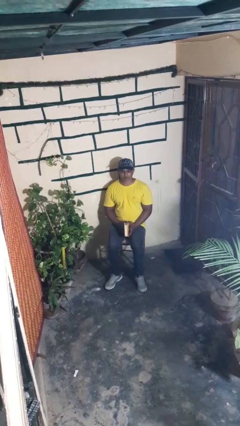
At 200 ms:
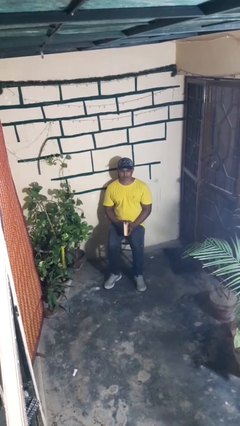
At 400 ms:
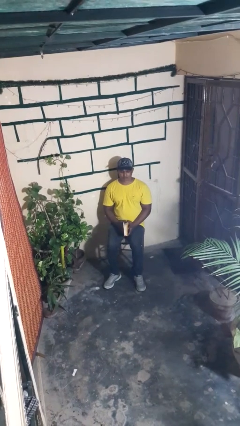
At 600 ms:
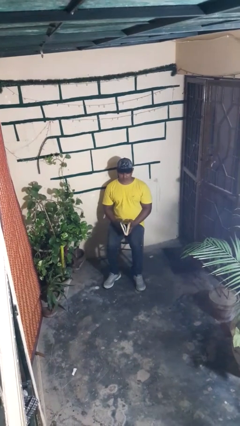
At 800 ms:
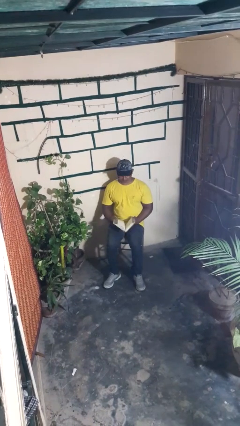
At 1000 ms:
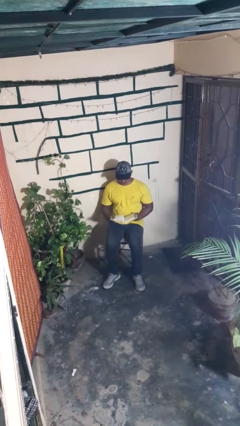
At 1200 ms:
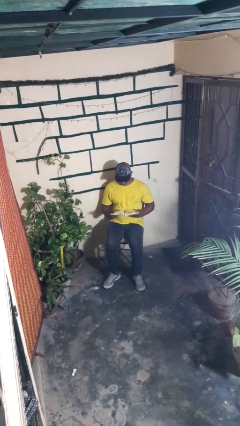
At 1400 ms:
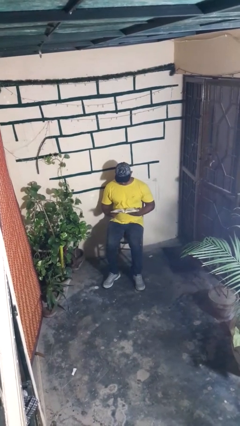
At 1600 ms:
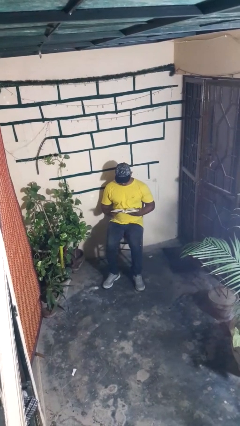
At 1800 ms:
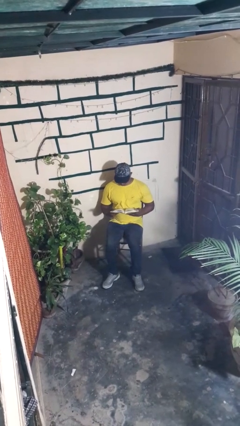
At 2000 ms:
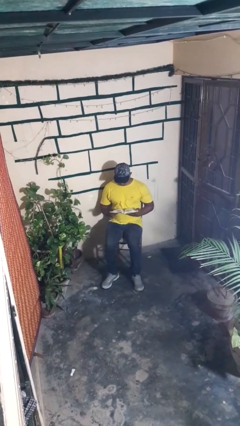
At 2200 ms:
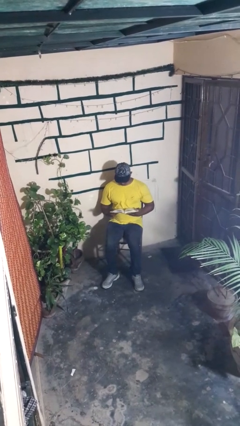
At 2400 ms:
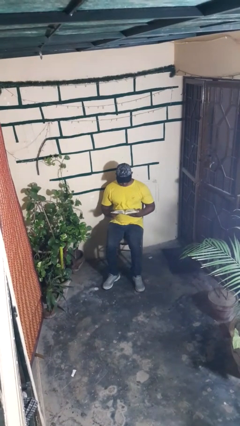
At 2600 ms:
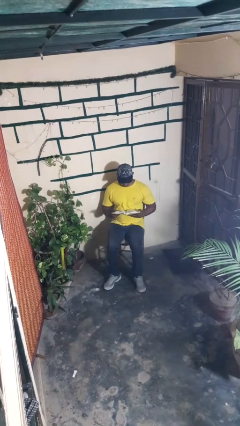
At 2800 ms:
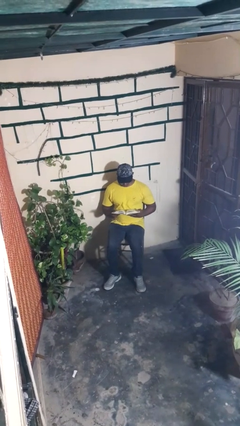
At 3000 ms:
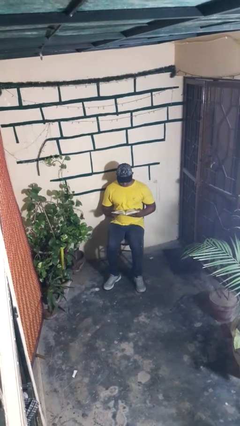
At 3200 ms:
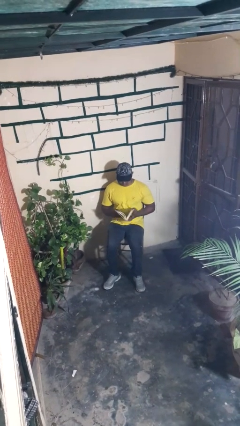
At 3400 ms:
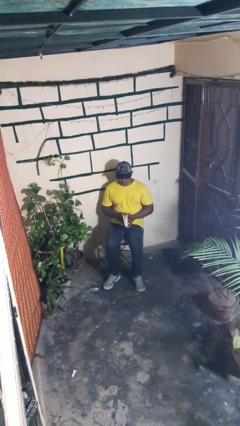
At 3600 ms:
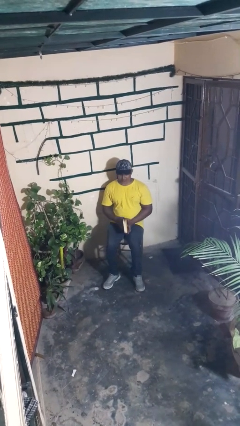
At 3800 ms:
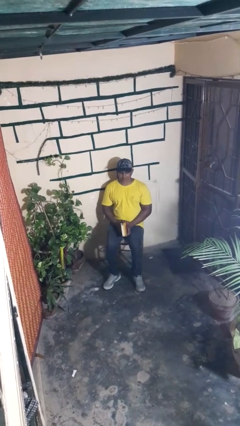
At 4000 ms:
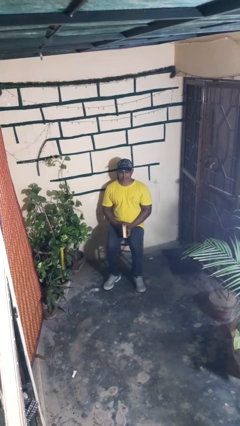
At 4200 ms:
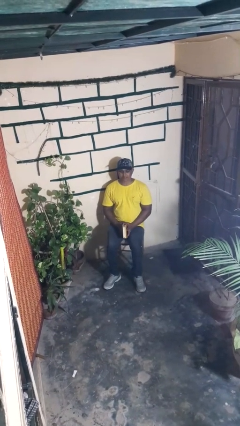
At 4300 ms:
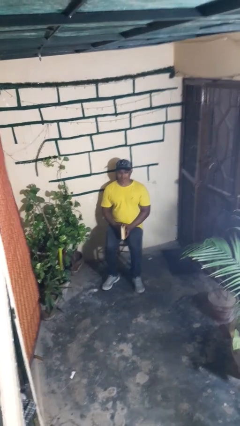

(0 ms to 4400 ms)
person reads book

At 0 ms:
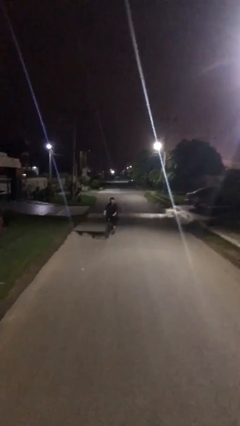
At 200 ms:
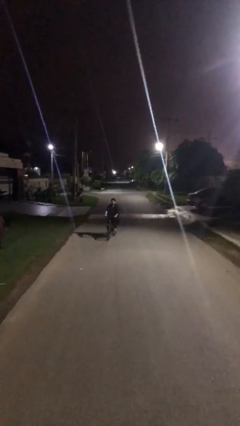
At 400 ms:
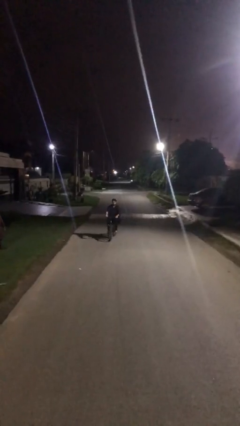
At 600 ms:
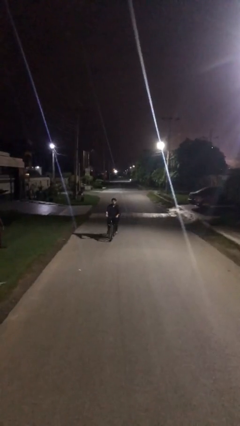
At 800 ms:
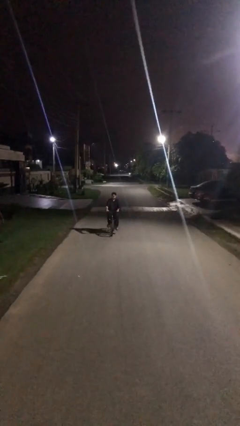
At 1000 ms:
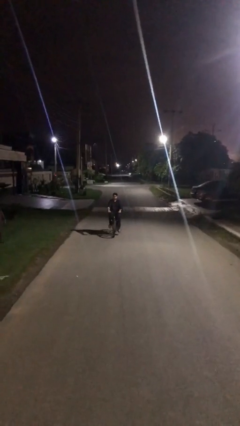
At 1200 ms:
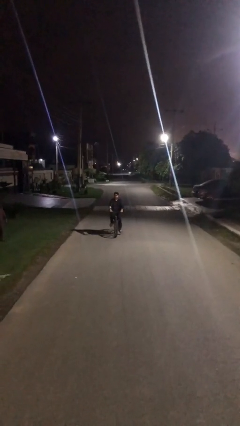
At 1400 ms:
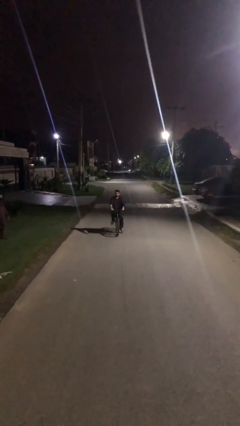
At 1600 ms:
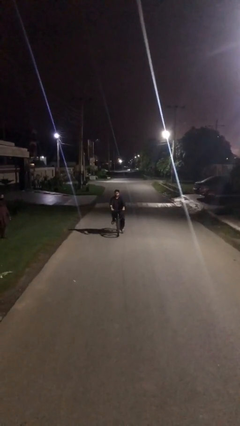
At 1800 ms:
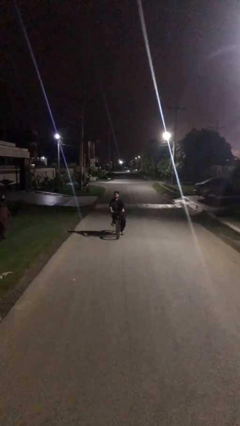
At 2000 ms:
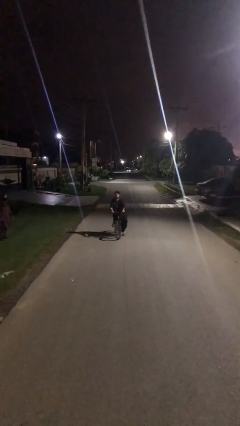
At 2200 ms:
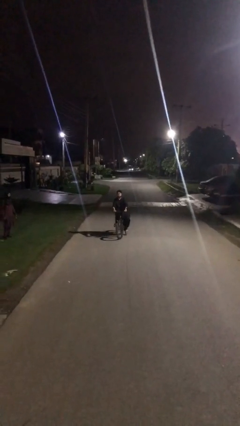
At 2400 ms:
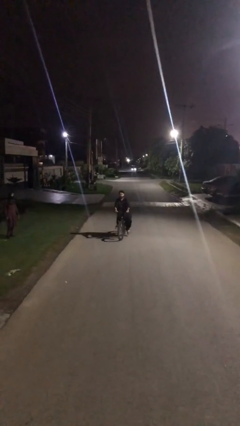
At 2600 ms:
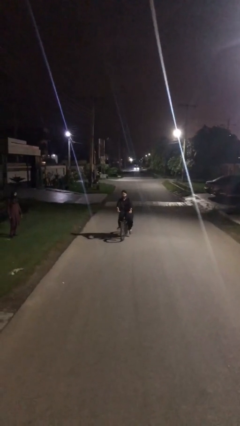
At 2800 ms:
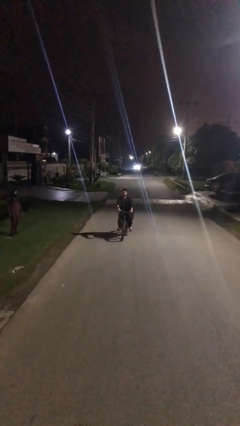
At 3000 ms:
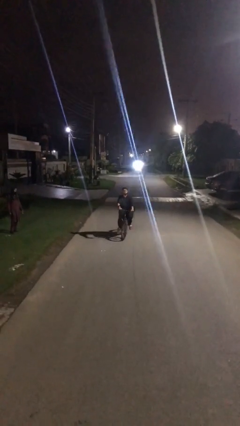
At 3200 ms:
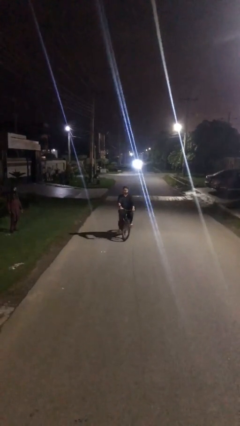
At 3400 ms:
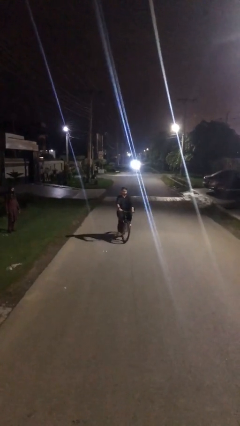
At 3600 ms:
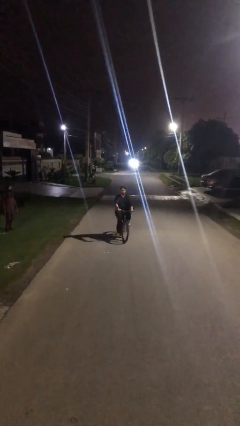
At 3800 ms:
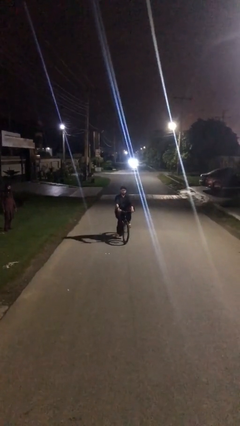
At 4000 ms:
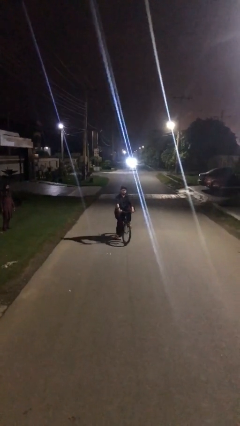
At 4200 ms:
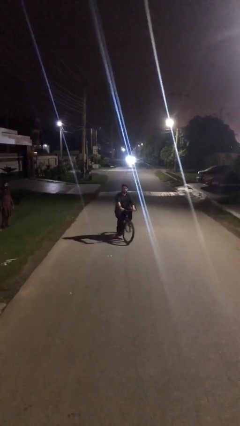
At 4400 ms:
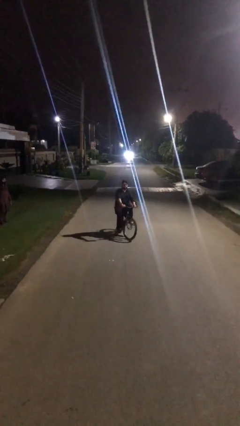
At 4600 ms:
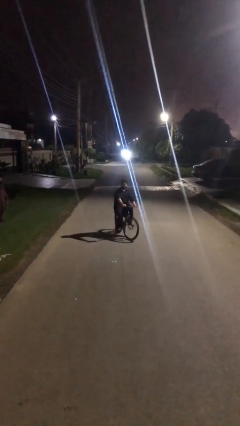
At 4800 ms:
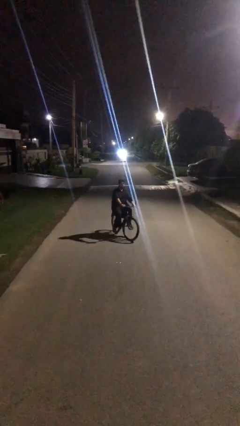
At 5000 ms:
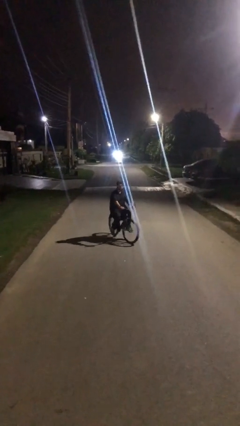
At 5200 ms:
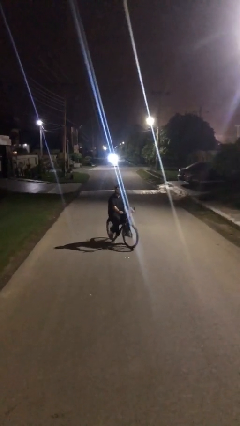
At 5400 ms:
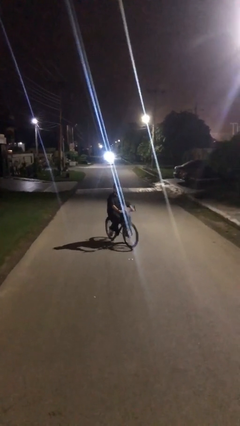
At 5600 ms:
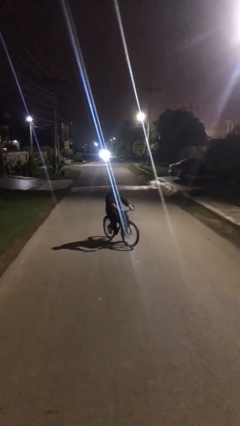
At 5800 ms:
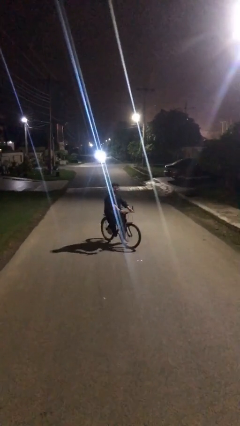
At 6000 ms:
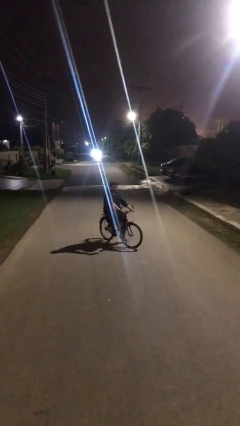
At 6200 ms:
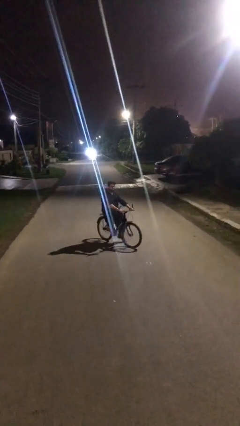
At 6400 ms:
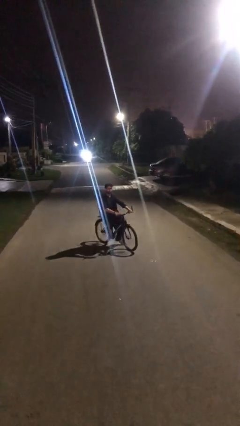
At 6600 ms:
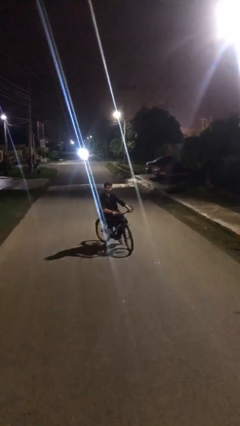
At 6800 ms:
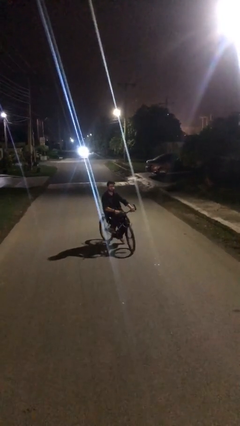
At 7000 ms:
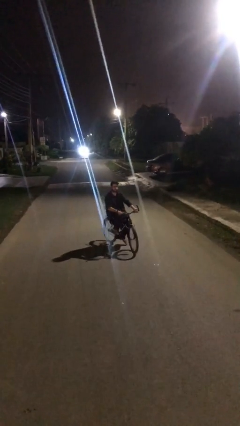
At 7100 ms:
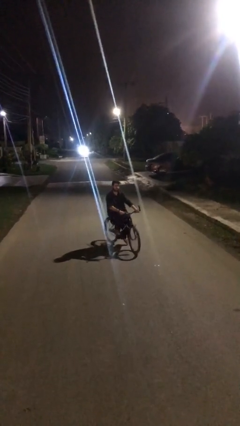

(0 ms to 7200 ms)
person rides bicycle

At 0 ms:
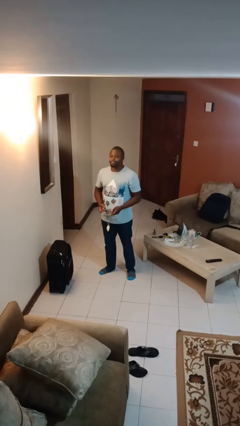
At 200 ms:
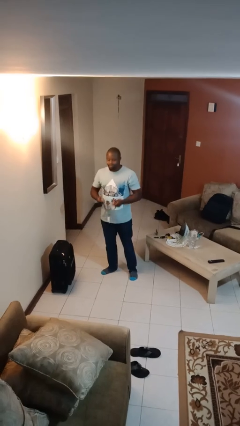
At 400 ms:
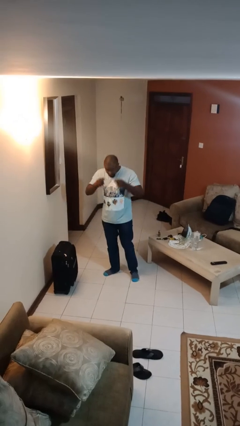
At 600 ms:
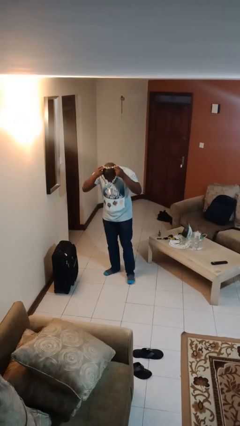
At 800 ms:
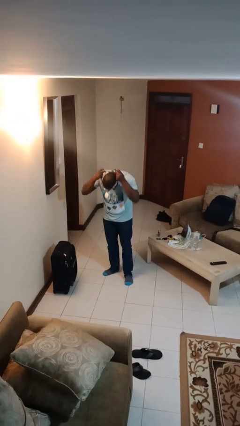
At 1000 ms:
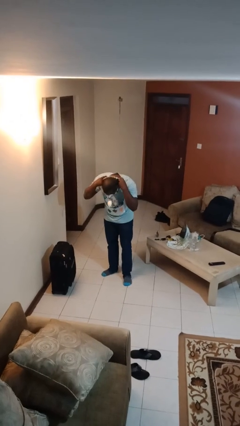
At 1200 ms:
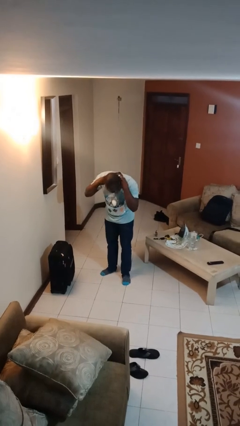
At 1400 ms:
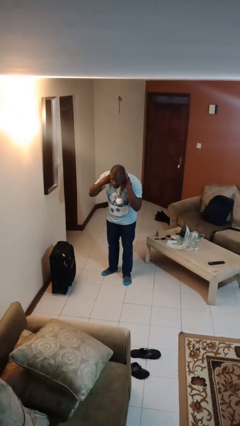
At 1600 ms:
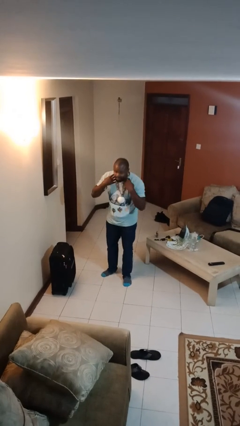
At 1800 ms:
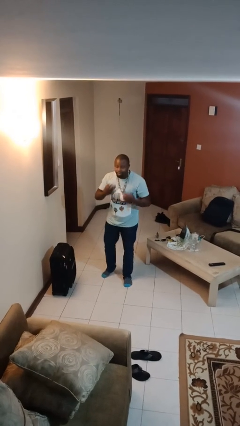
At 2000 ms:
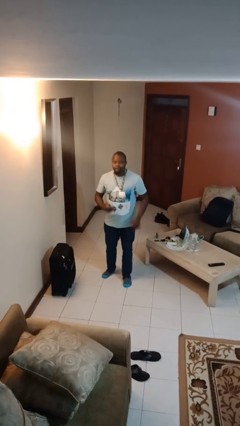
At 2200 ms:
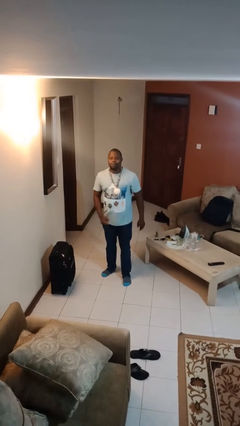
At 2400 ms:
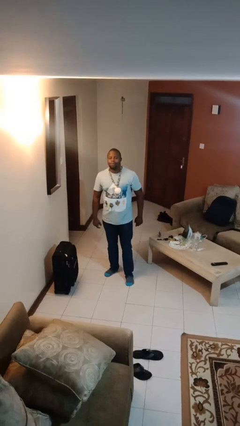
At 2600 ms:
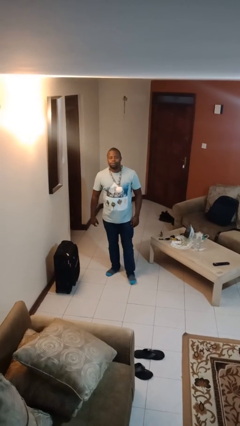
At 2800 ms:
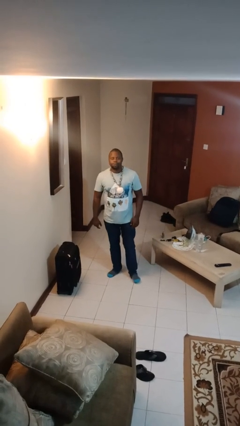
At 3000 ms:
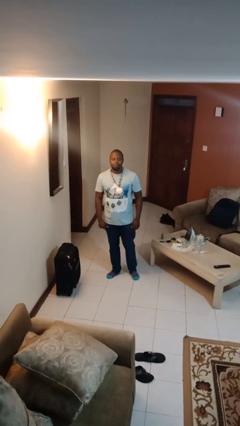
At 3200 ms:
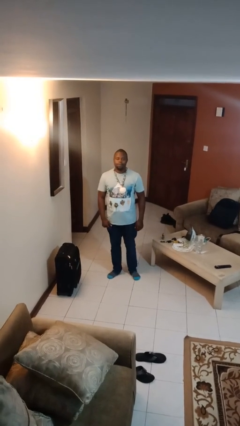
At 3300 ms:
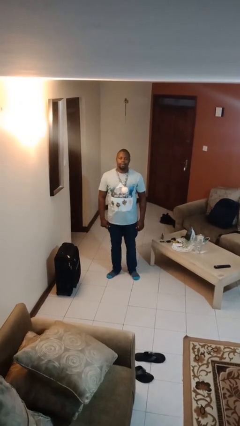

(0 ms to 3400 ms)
person puts on necklace

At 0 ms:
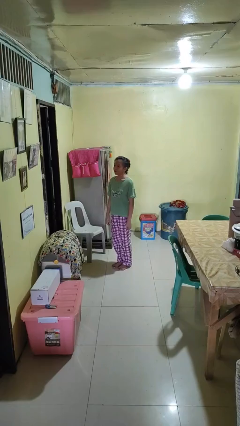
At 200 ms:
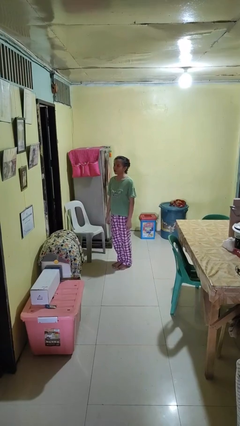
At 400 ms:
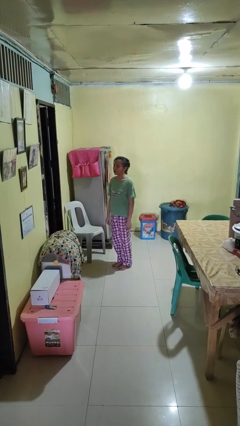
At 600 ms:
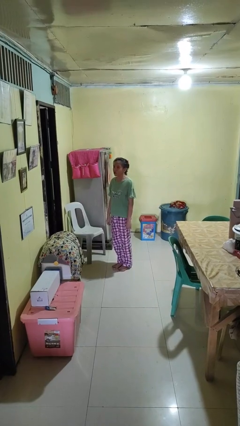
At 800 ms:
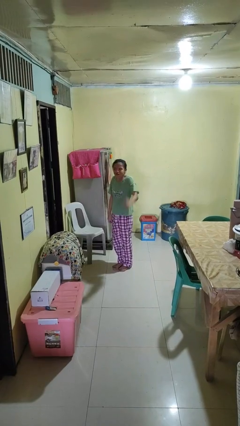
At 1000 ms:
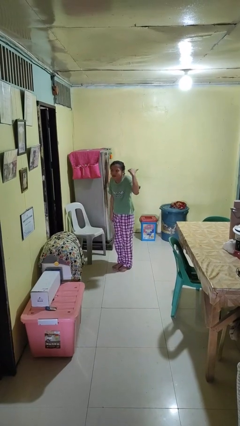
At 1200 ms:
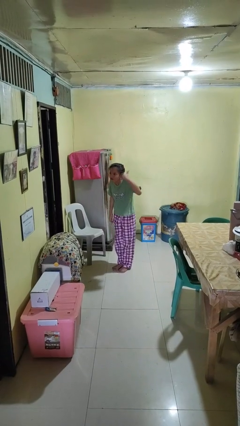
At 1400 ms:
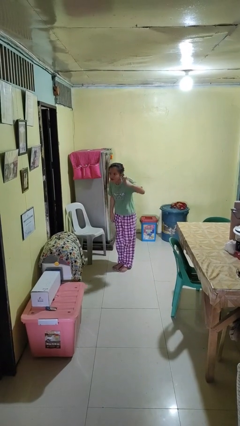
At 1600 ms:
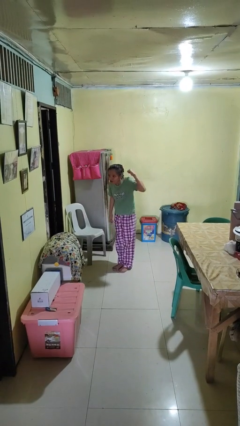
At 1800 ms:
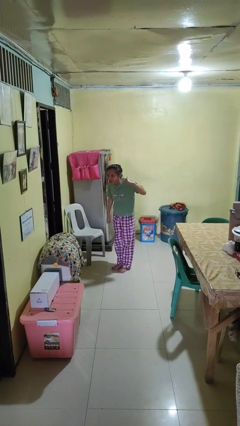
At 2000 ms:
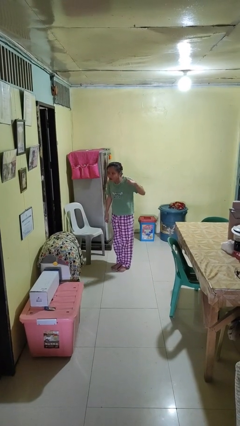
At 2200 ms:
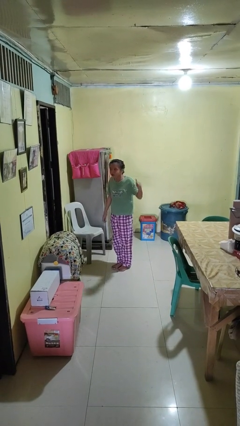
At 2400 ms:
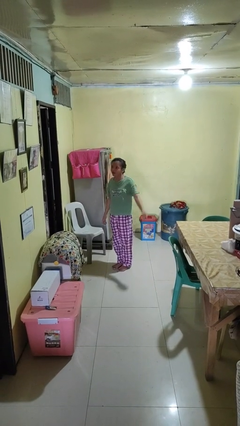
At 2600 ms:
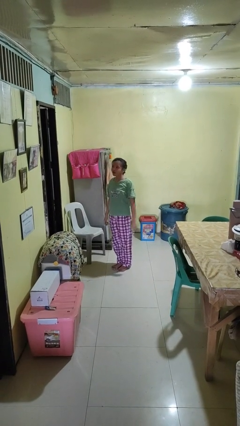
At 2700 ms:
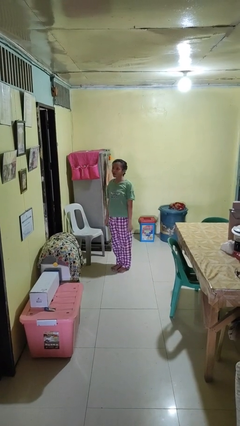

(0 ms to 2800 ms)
person gestures behind me
